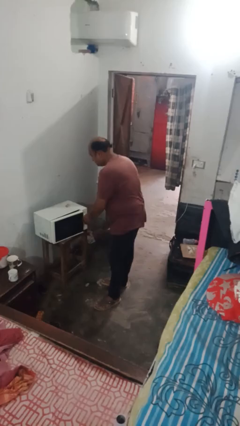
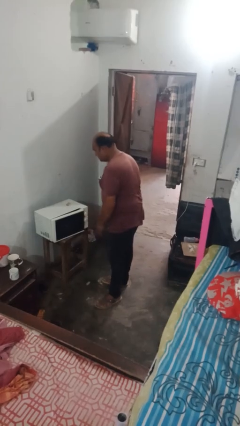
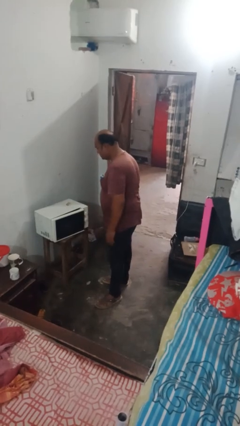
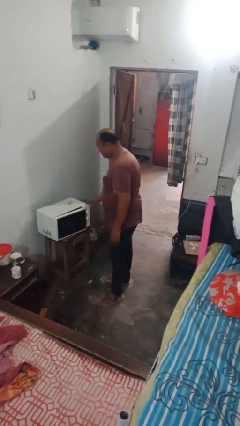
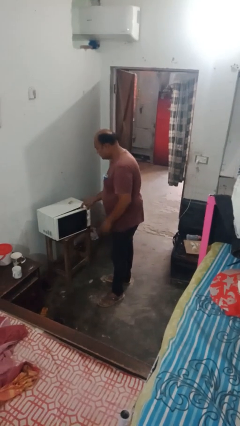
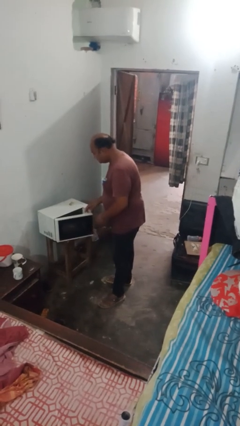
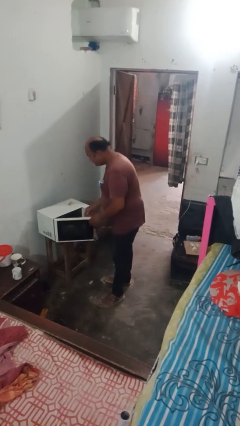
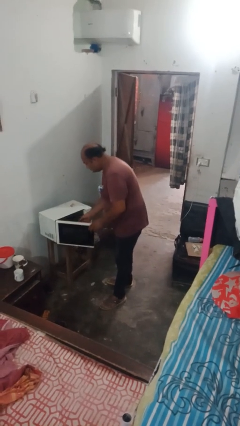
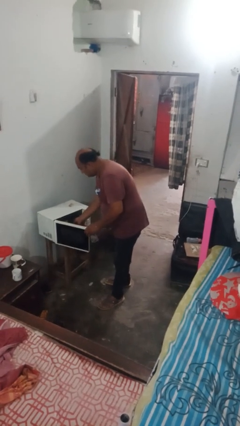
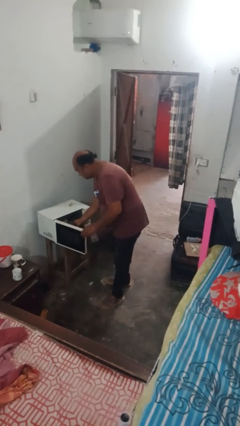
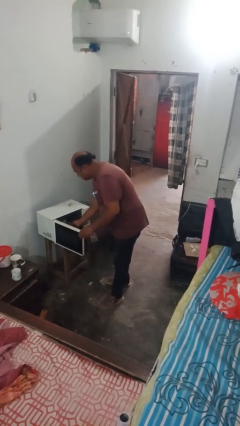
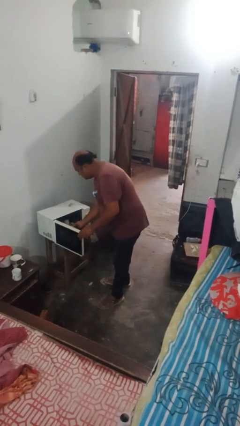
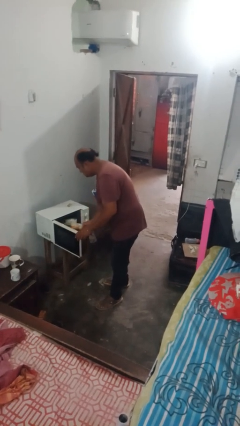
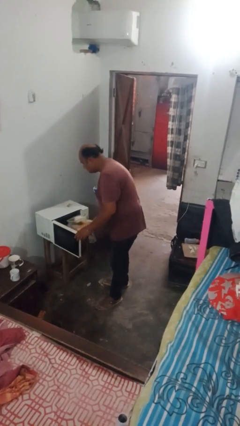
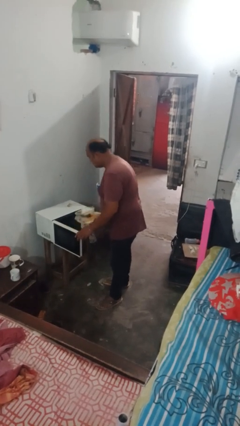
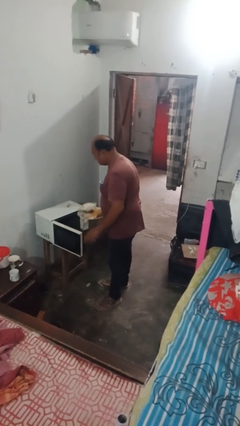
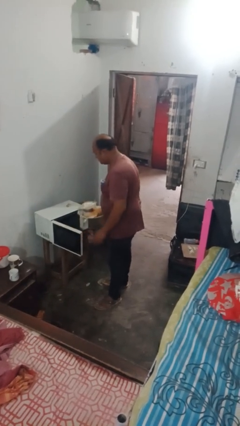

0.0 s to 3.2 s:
person takes object from microwave

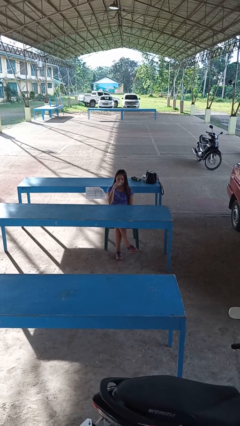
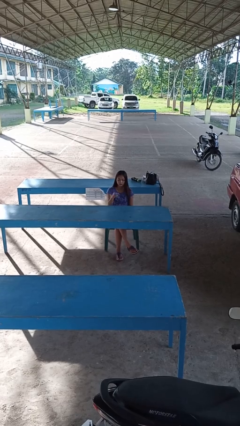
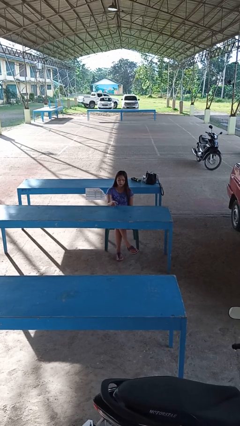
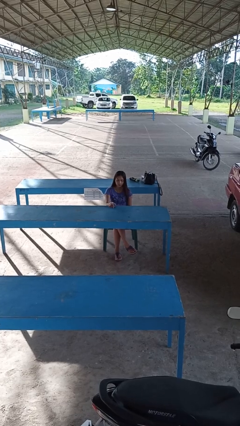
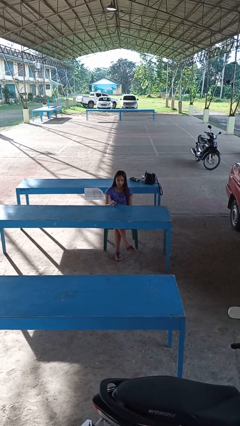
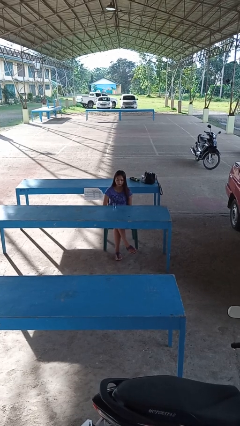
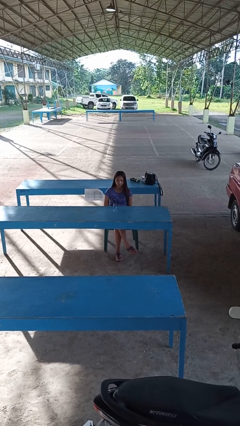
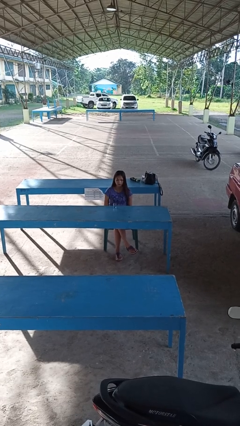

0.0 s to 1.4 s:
person puts down object on table

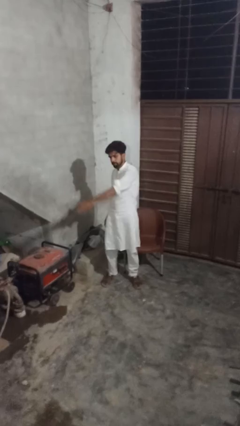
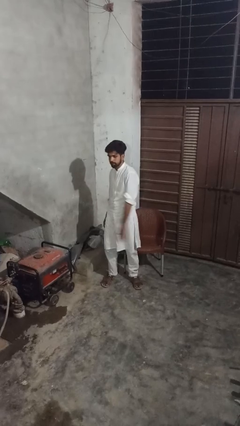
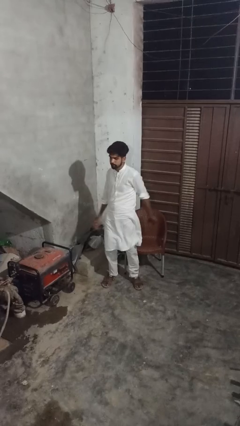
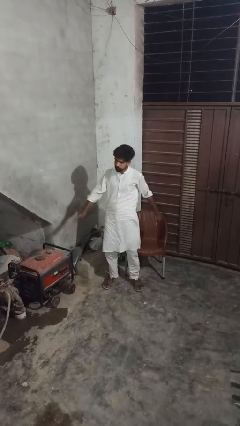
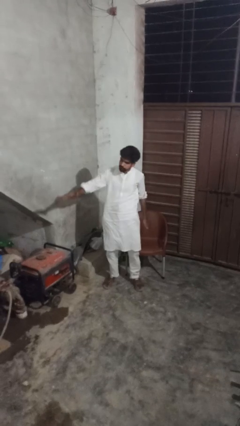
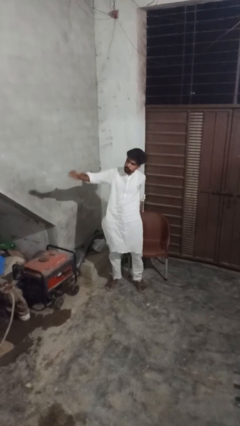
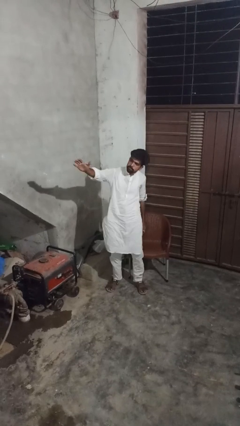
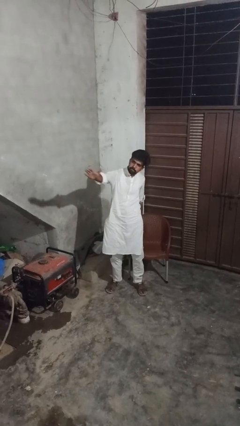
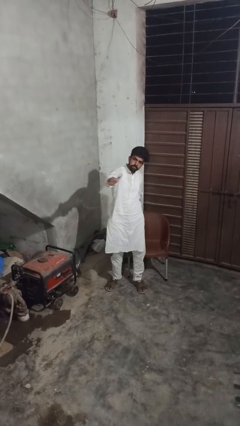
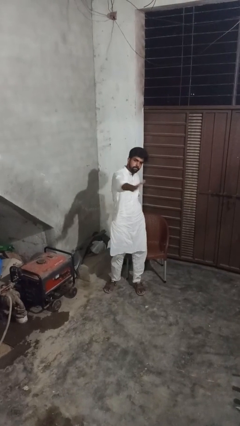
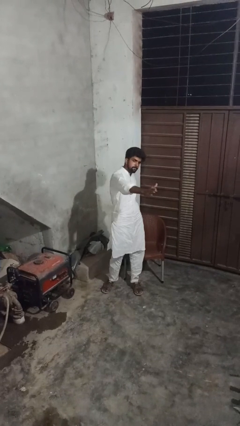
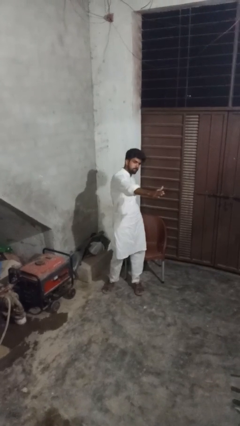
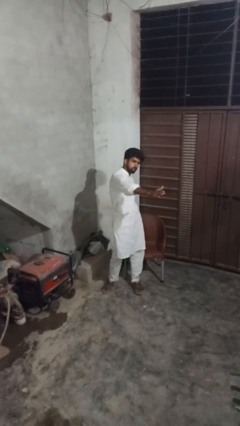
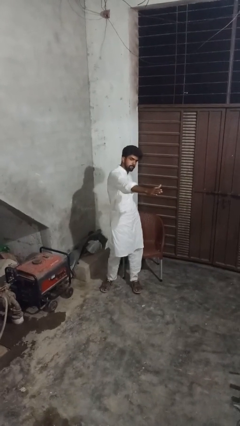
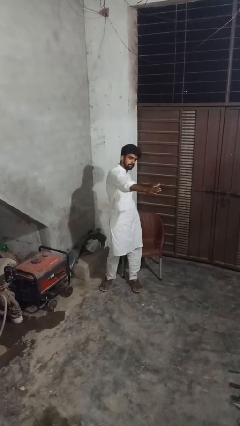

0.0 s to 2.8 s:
person gestures swipe left

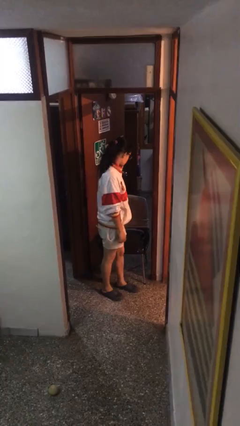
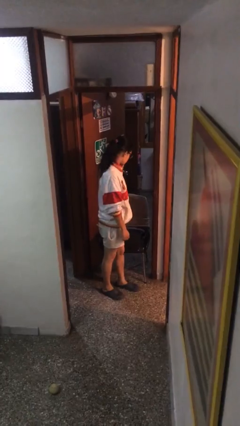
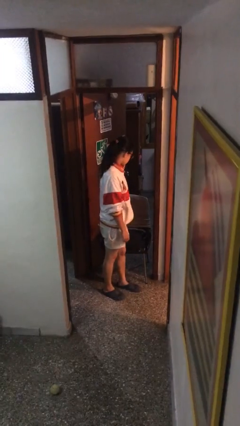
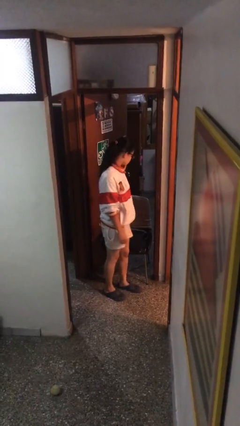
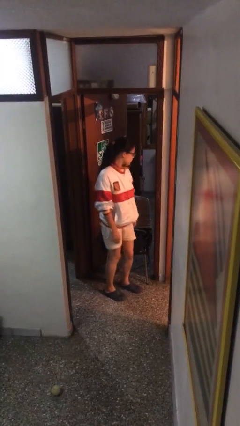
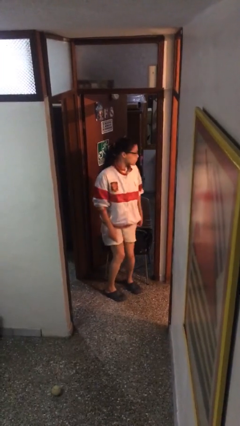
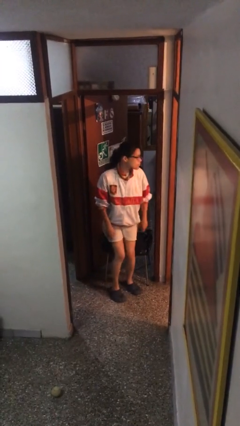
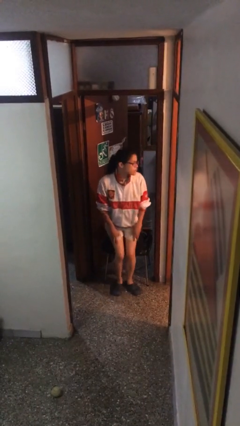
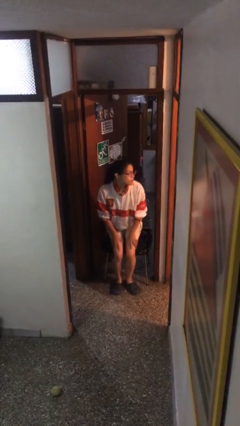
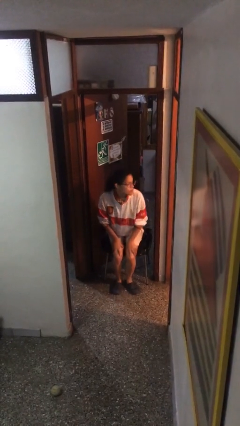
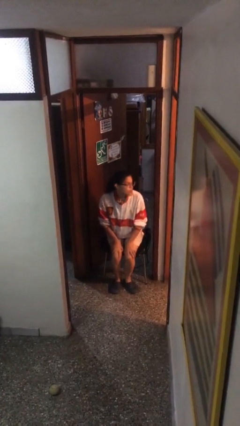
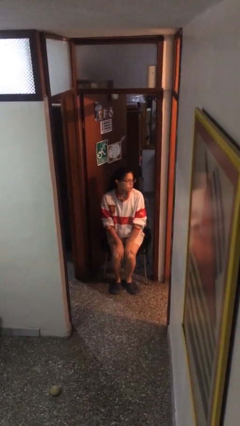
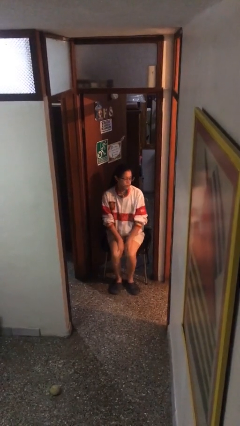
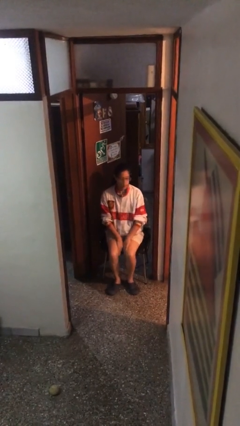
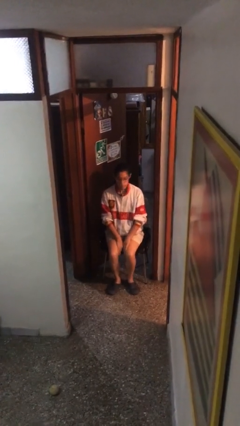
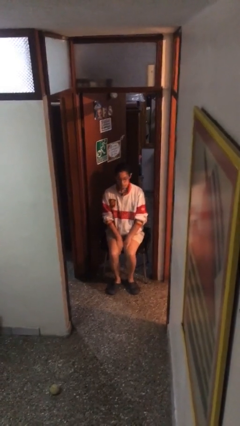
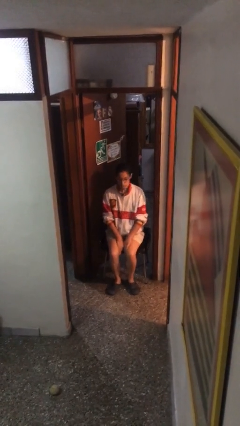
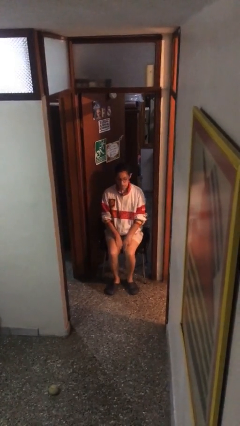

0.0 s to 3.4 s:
person sits down

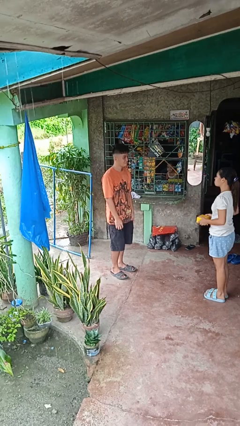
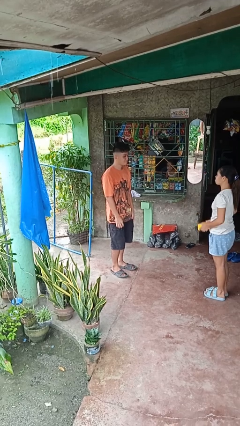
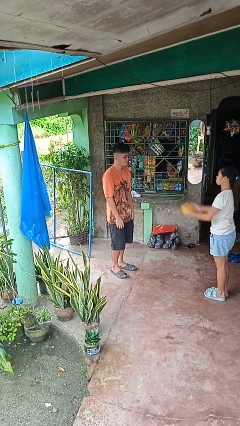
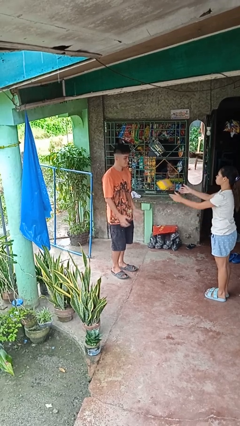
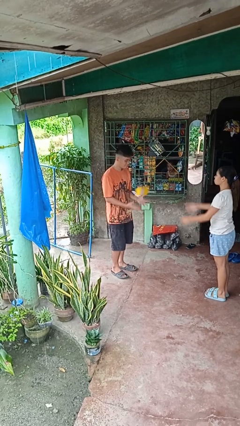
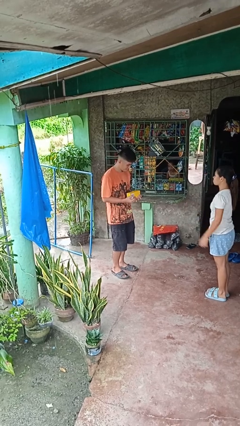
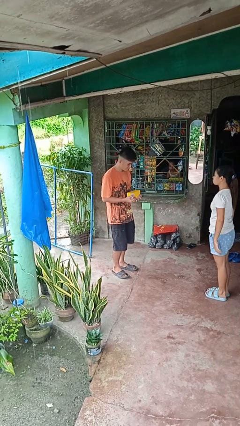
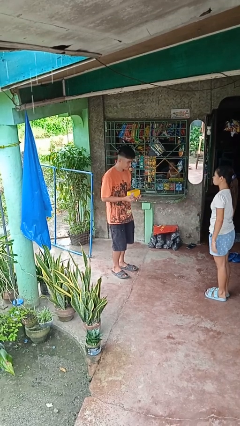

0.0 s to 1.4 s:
person catches object from person

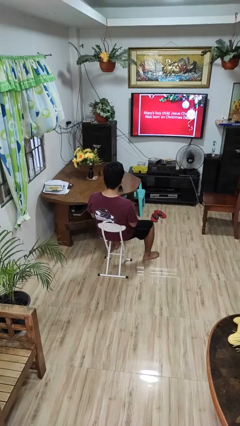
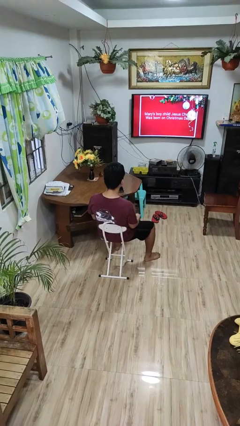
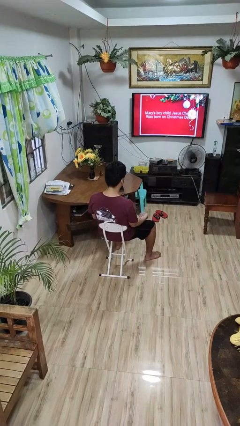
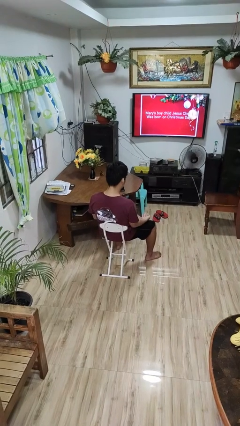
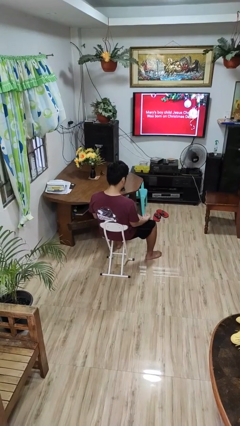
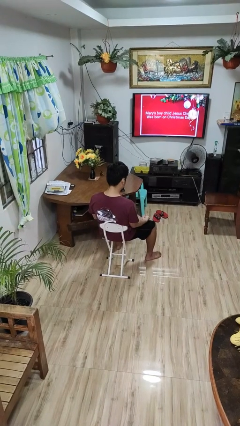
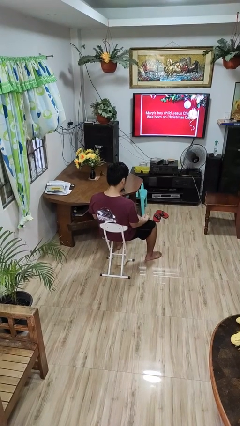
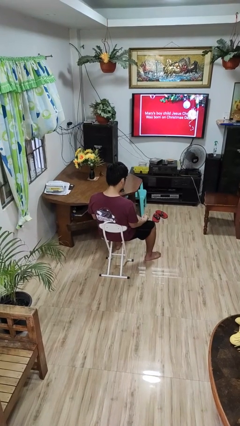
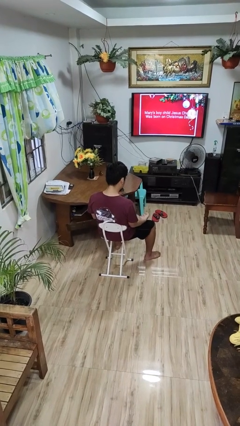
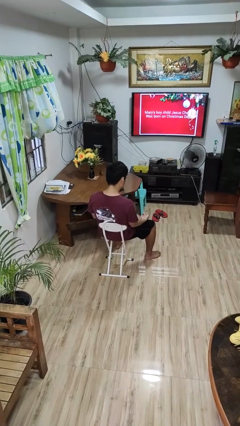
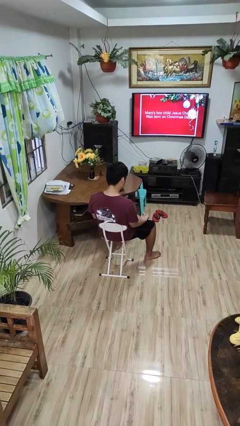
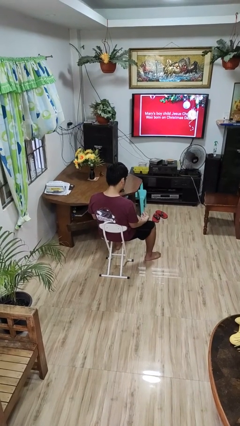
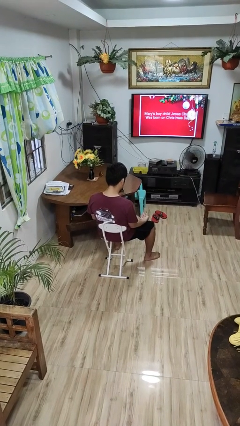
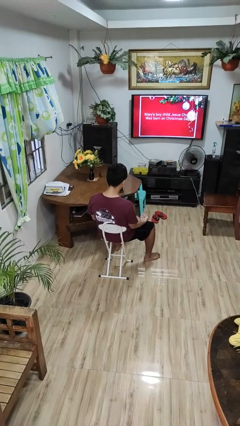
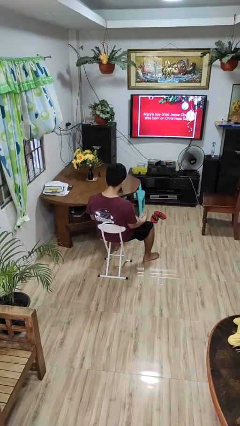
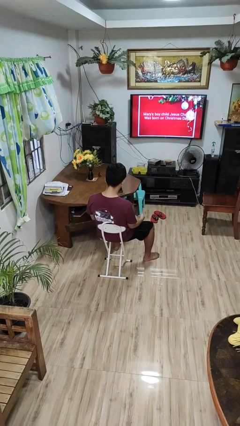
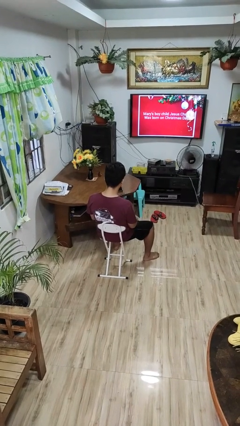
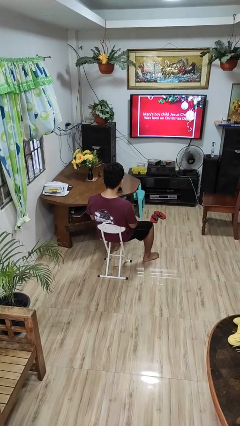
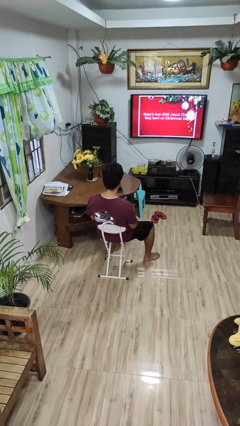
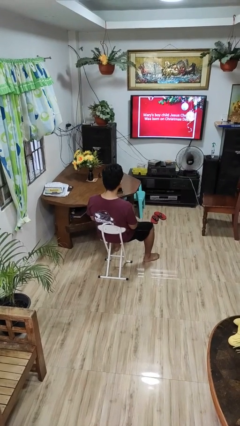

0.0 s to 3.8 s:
person looks at hands in lap

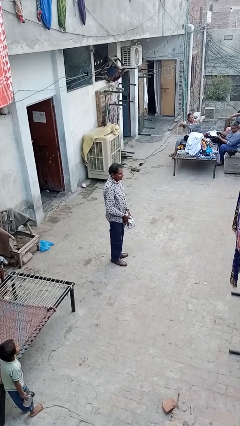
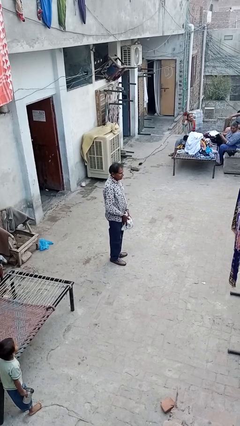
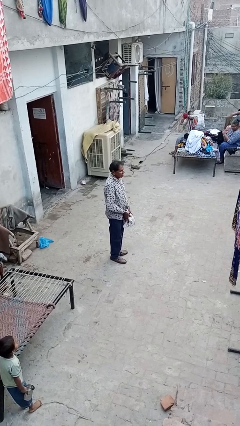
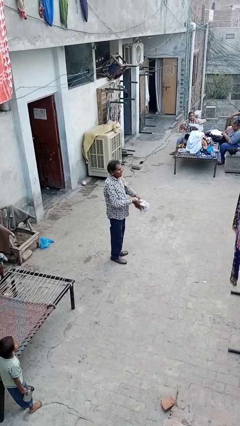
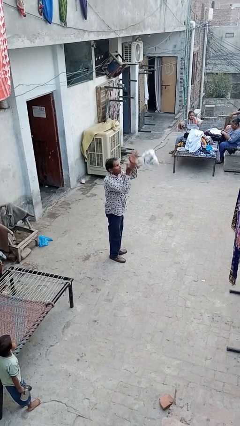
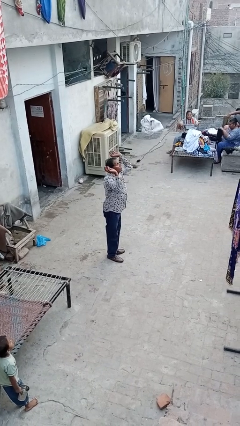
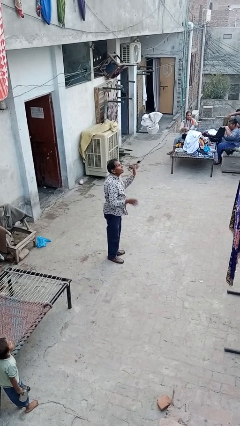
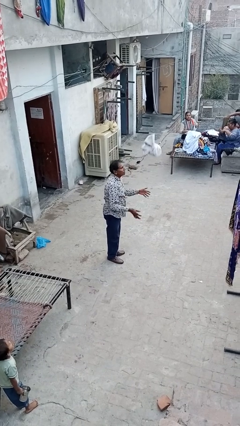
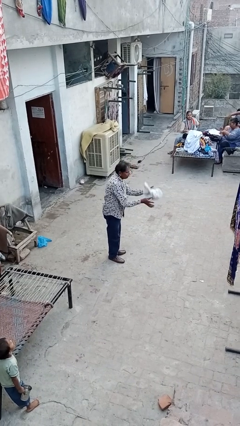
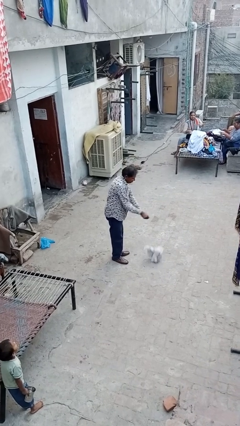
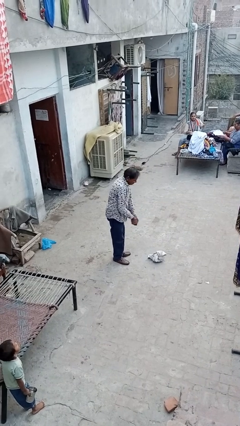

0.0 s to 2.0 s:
person drops object
